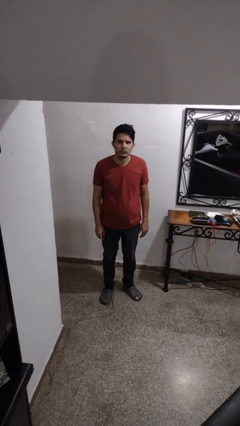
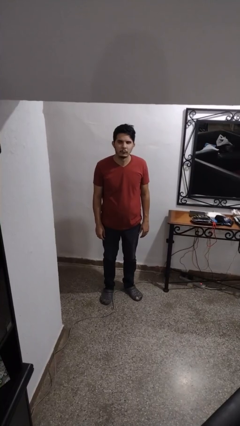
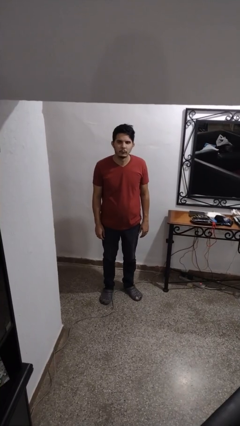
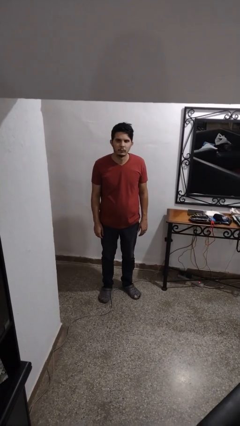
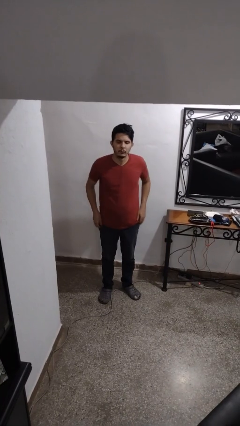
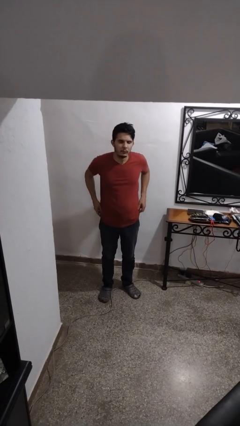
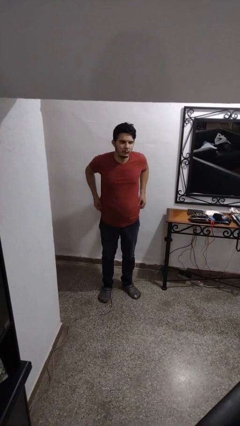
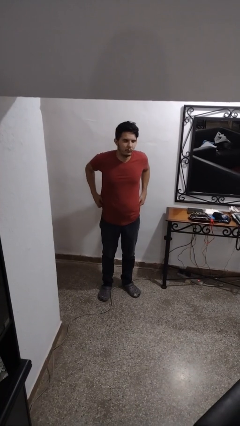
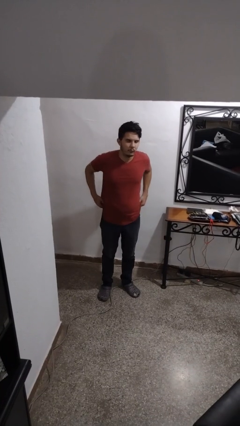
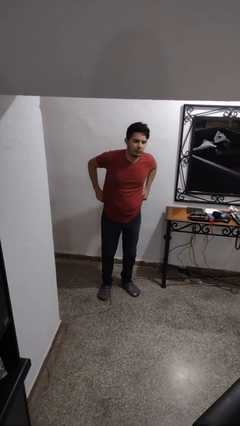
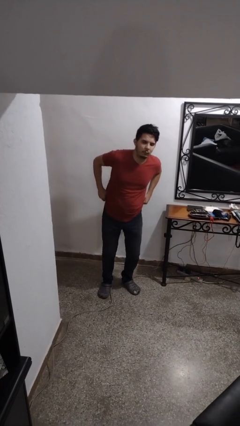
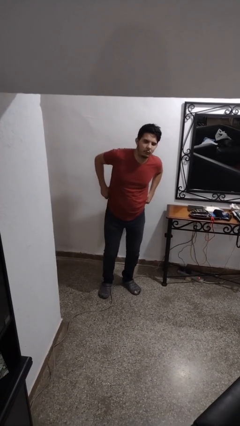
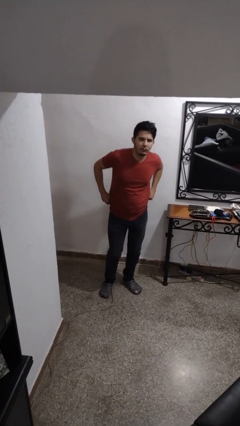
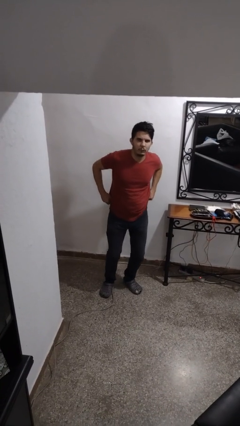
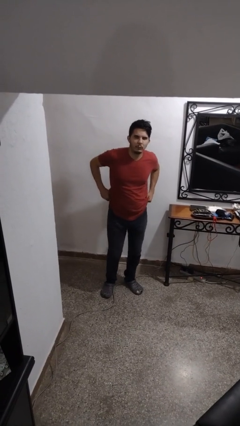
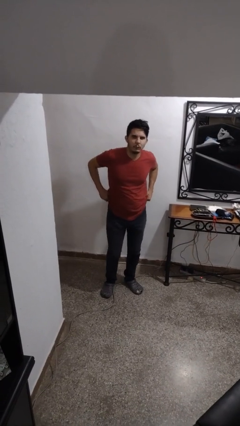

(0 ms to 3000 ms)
person hikes up pants

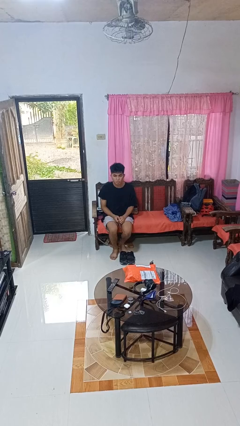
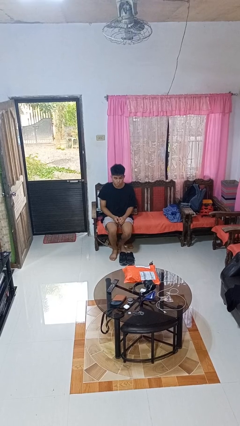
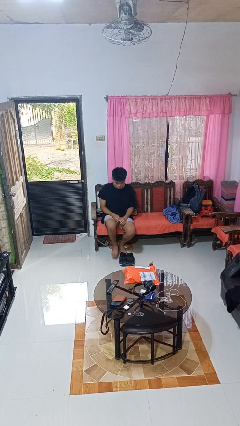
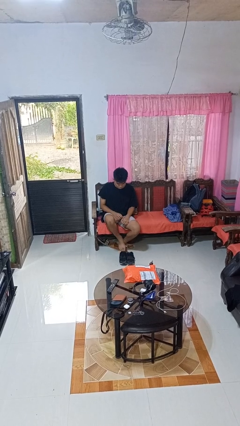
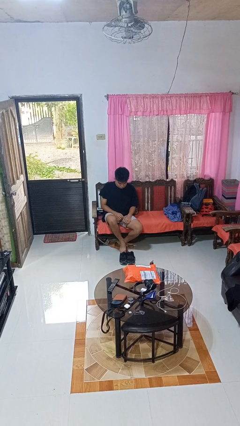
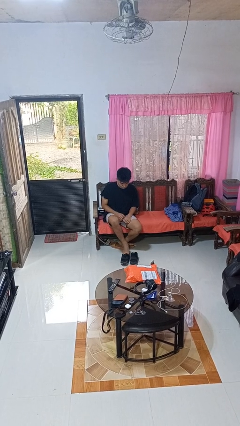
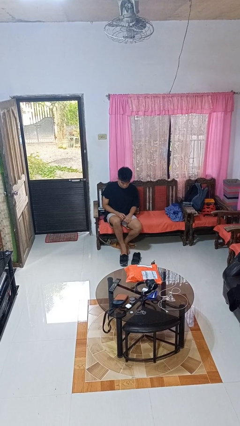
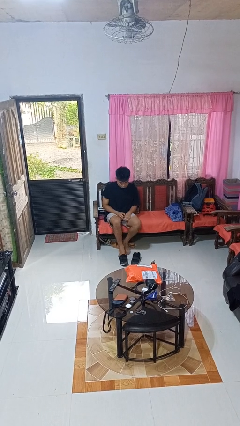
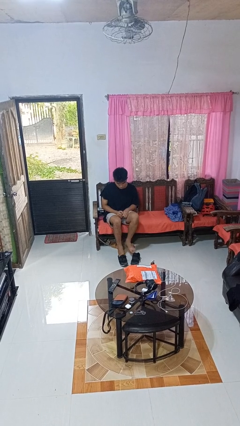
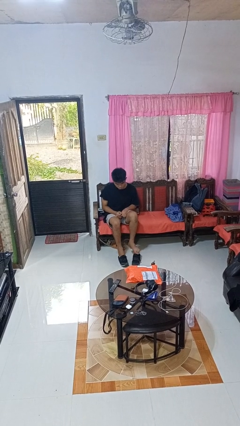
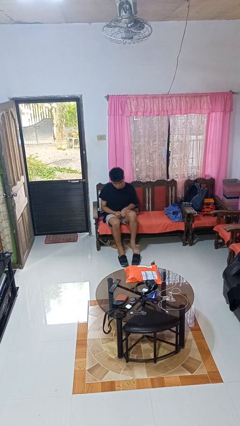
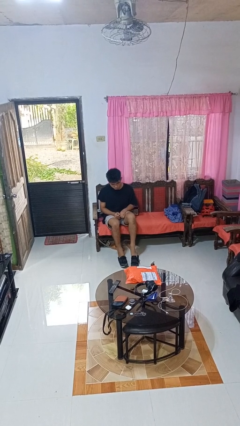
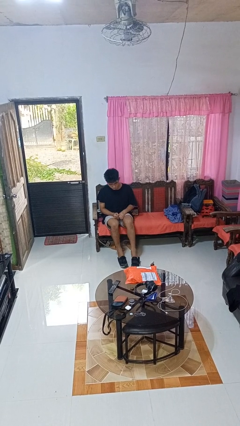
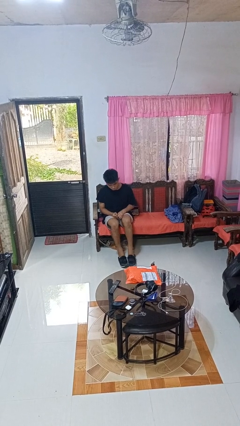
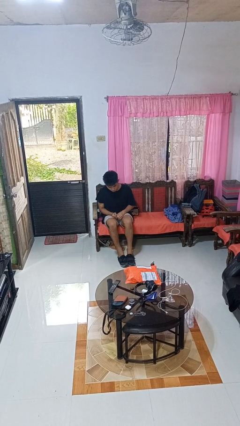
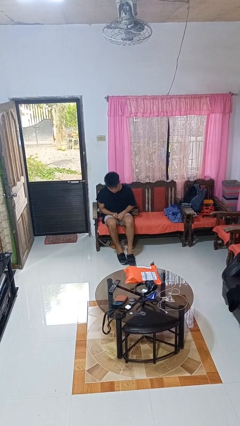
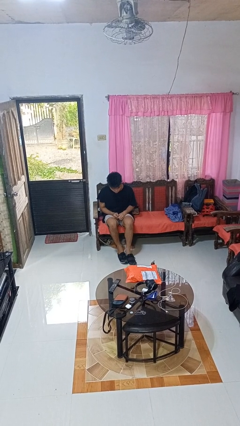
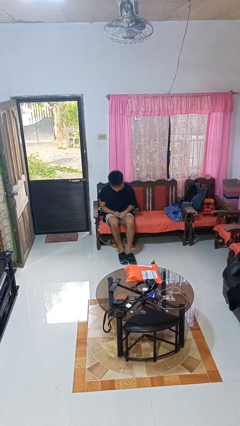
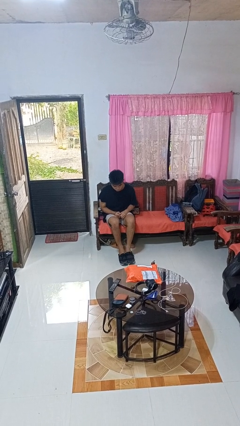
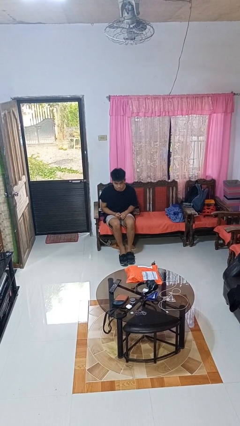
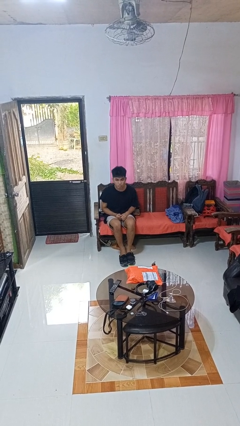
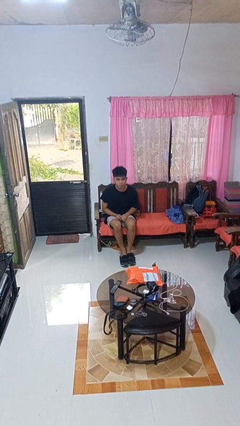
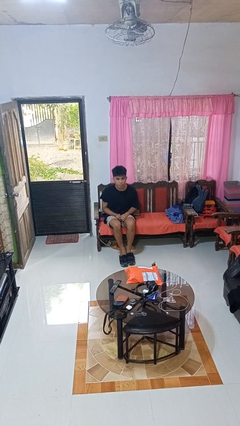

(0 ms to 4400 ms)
person puts on shoes

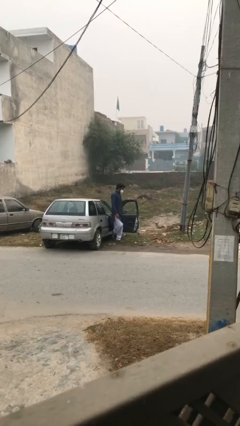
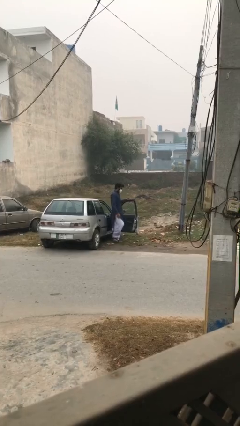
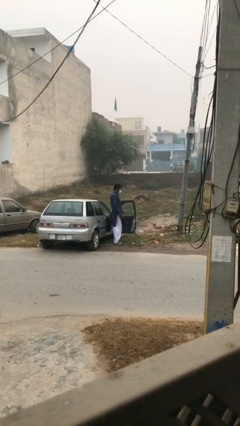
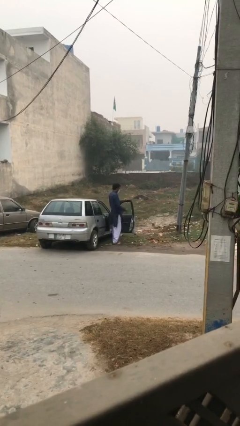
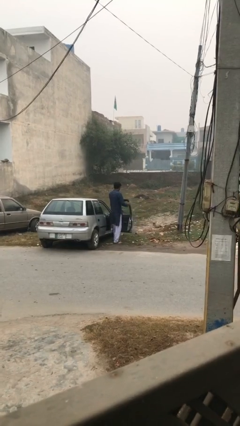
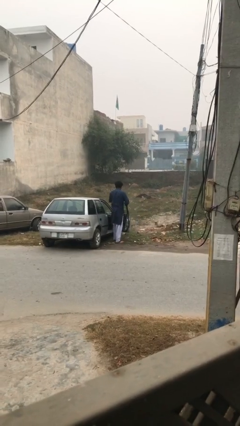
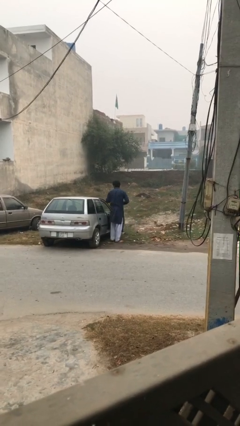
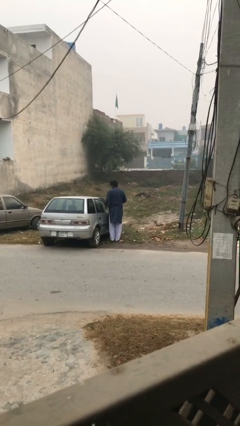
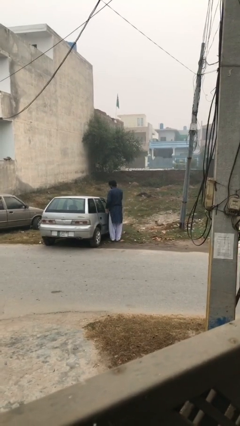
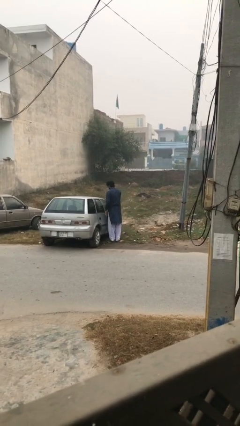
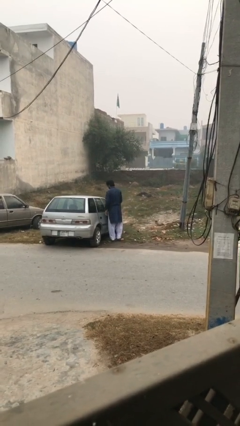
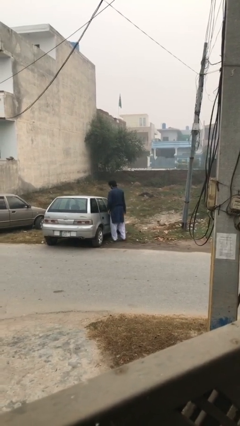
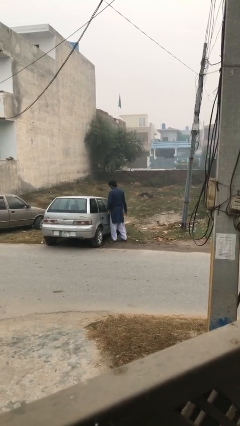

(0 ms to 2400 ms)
person closes car door

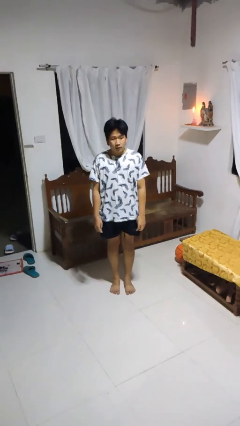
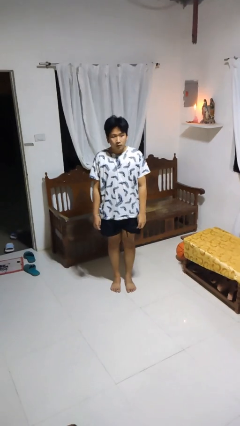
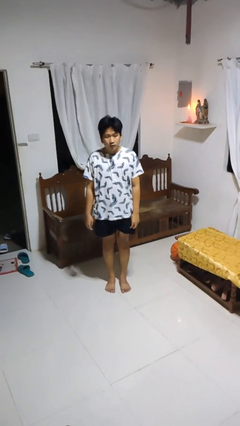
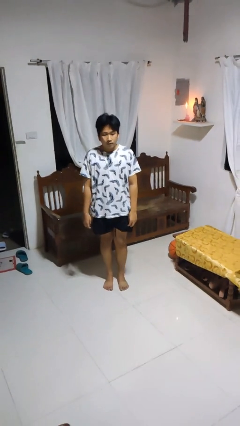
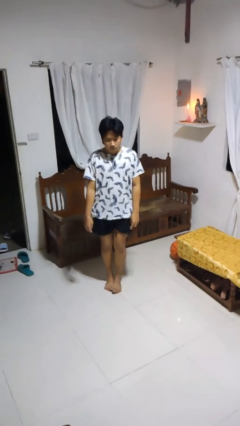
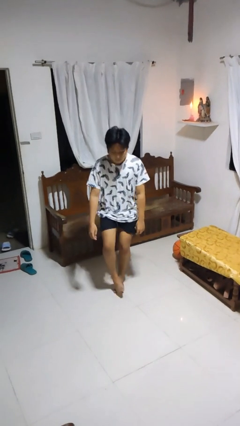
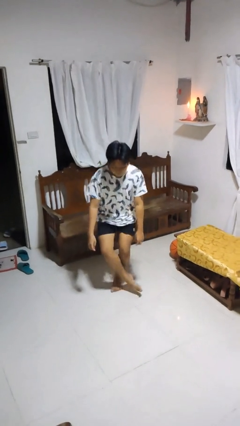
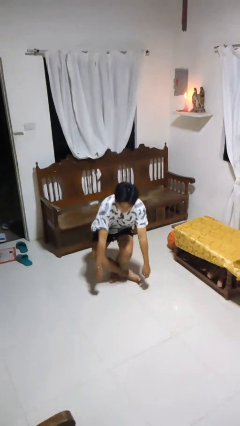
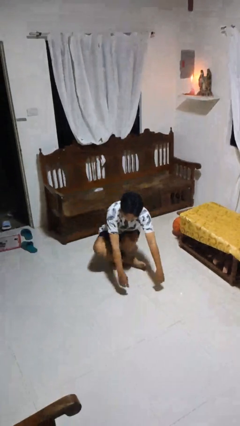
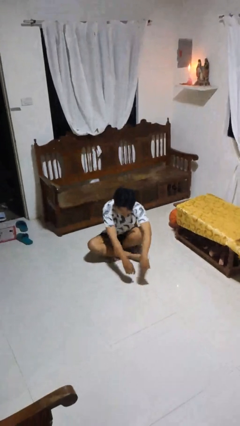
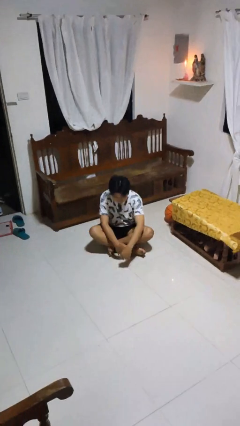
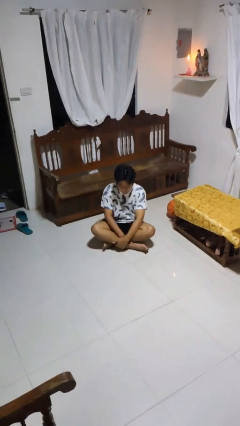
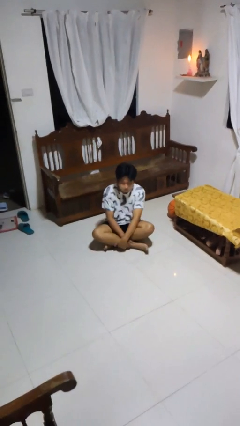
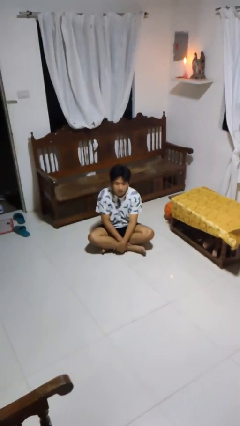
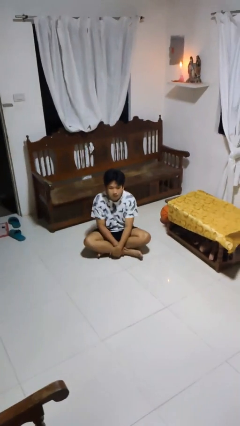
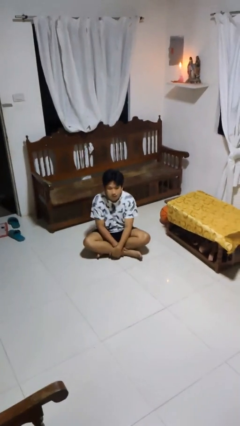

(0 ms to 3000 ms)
person sits crisscross

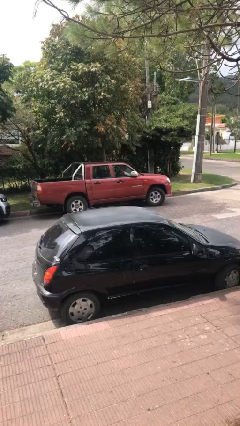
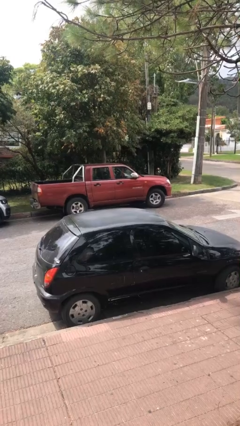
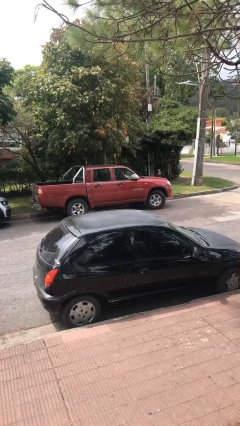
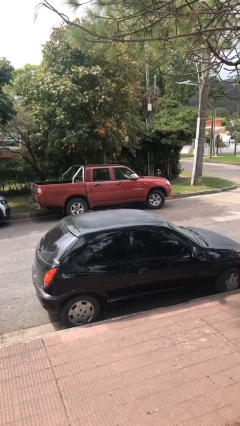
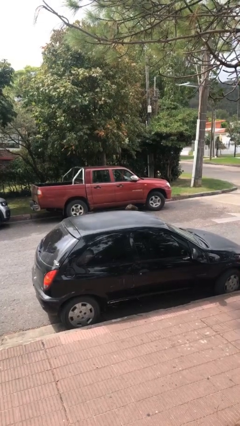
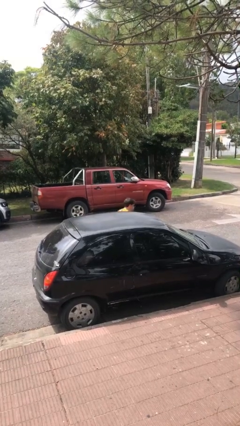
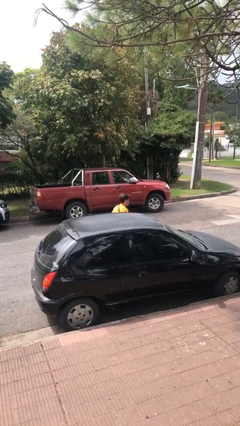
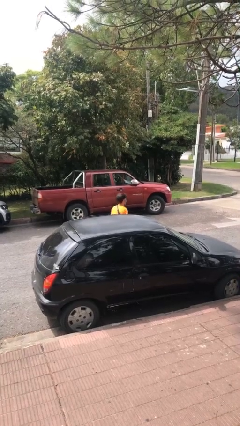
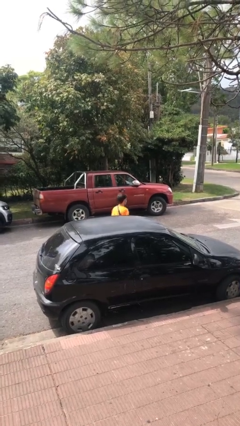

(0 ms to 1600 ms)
person exits car

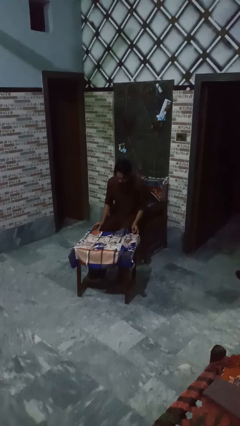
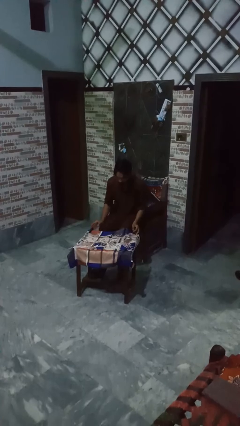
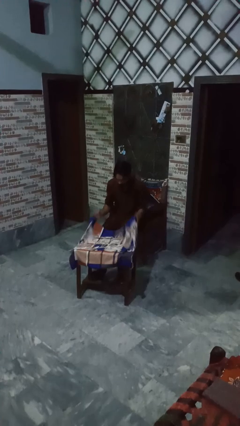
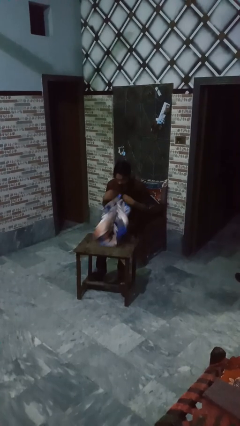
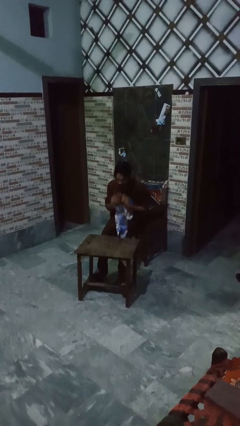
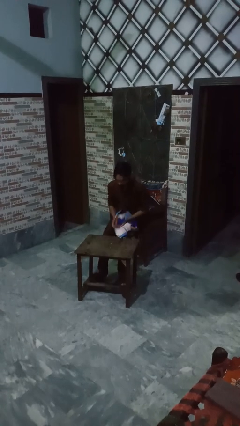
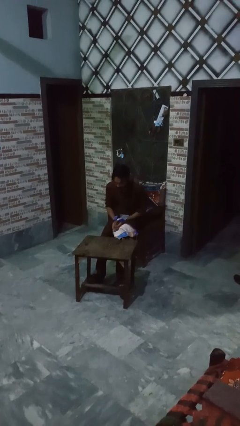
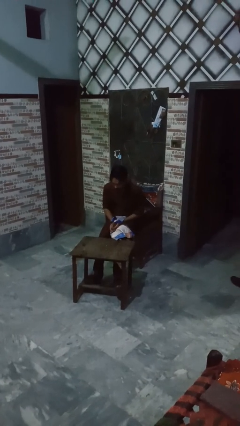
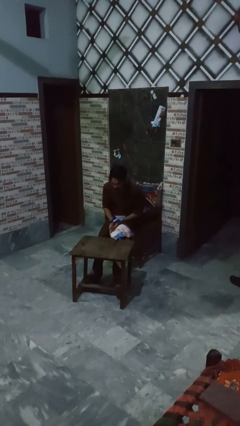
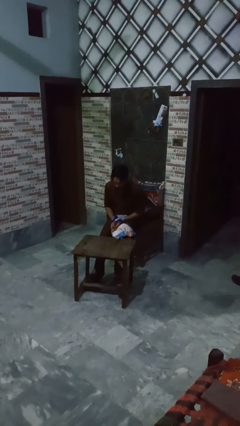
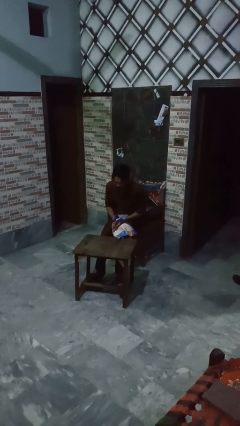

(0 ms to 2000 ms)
person folds tablecloth

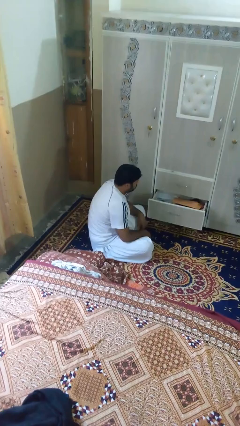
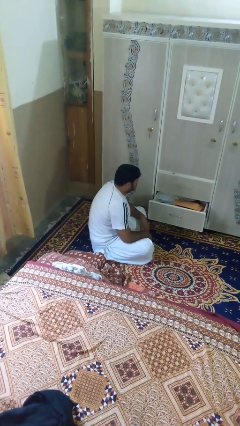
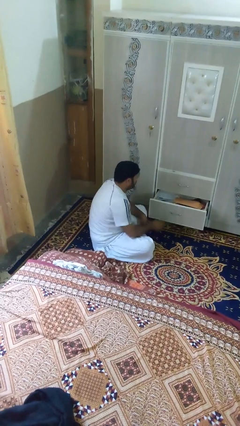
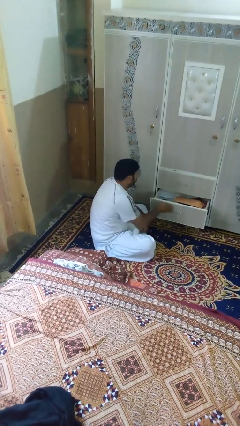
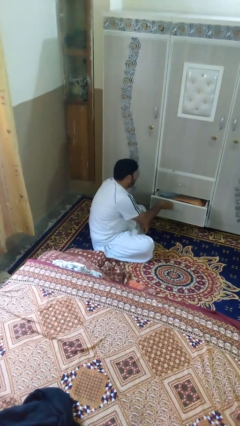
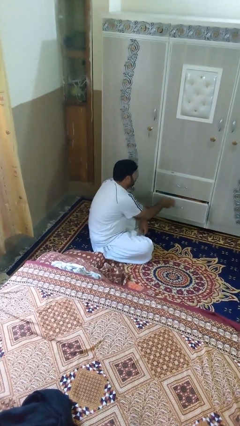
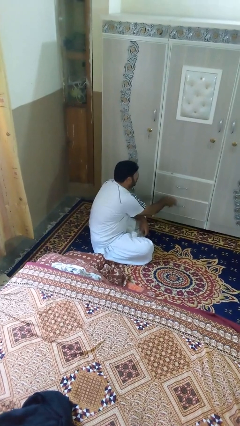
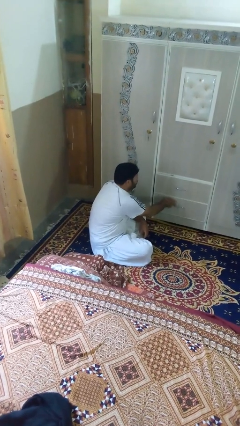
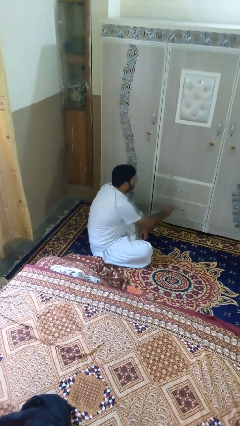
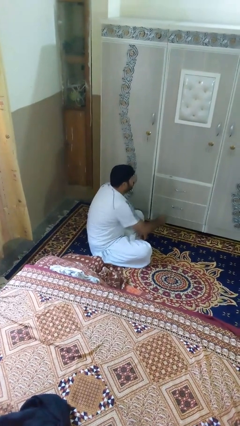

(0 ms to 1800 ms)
person closes dresser drawer
